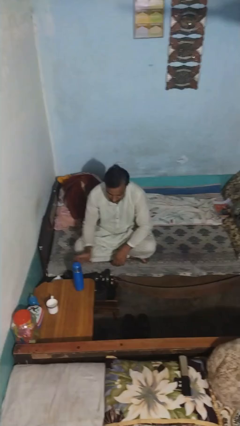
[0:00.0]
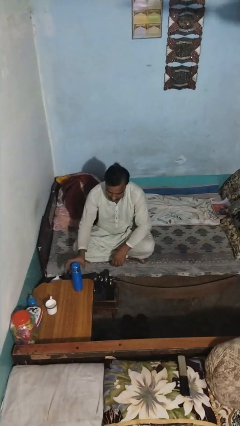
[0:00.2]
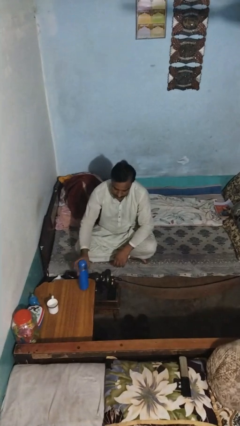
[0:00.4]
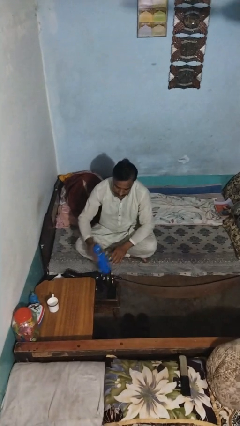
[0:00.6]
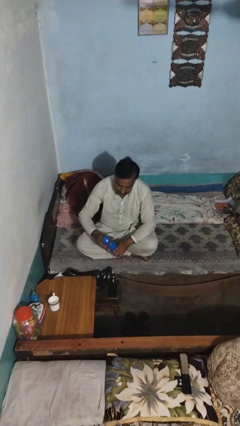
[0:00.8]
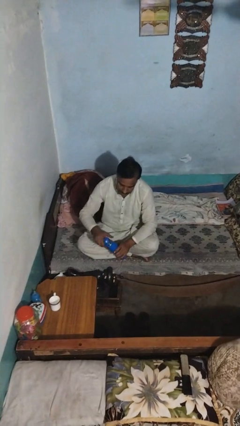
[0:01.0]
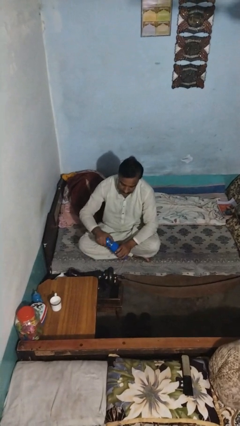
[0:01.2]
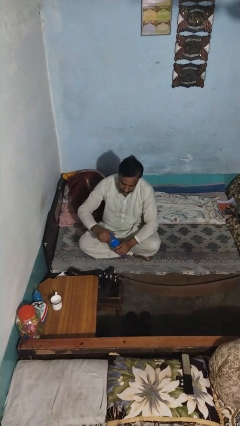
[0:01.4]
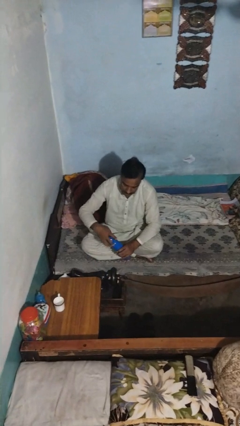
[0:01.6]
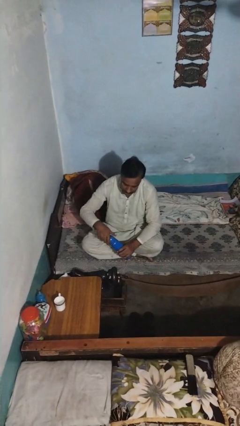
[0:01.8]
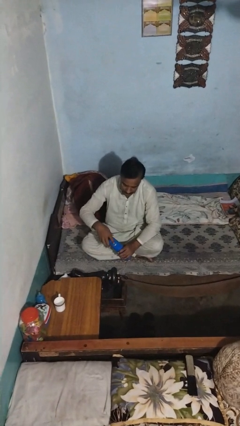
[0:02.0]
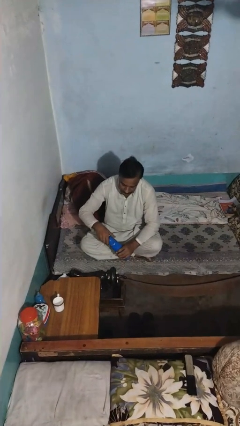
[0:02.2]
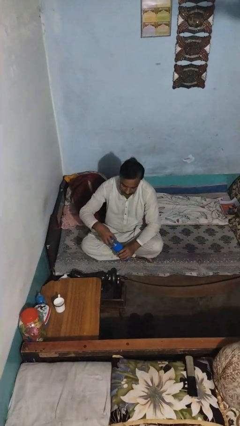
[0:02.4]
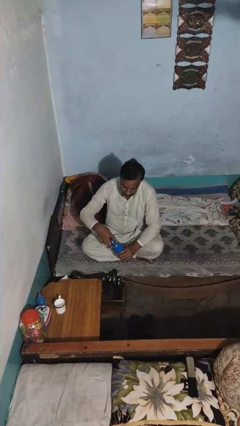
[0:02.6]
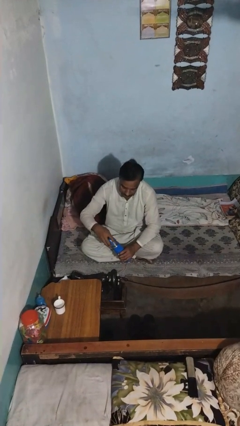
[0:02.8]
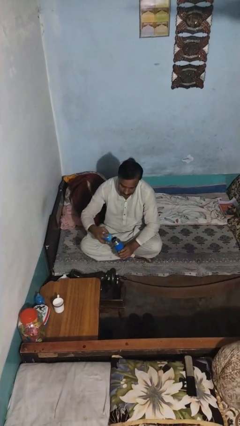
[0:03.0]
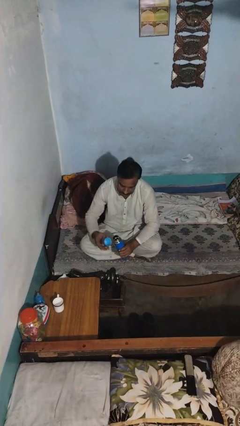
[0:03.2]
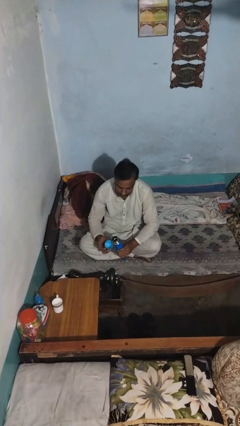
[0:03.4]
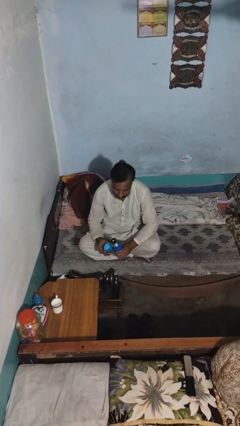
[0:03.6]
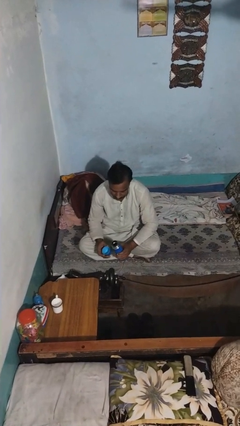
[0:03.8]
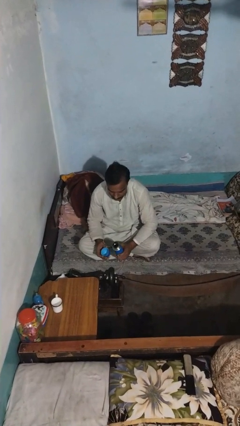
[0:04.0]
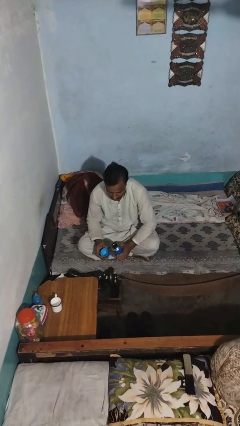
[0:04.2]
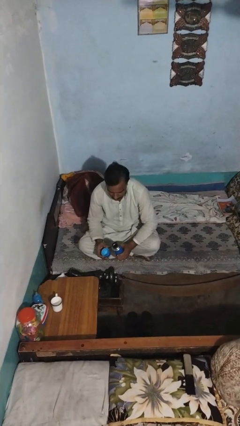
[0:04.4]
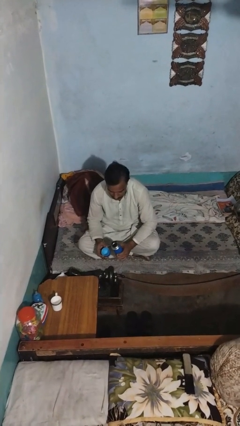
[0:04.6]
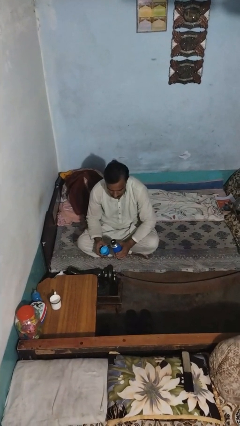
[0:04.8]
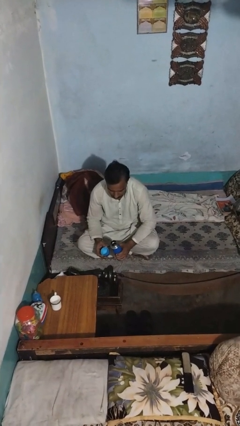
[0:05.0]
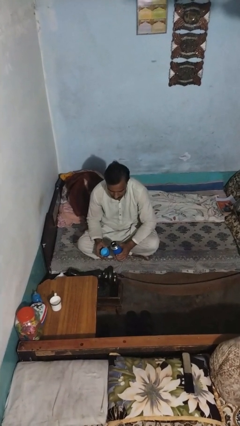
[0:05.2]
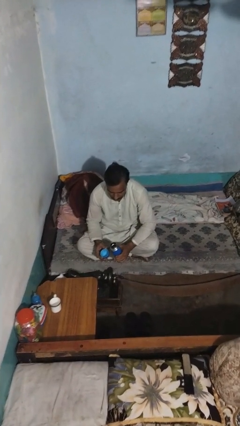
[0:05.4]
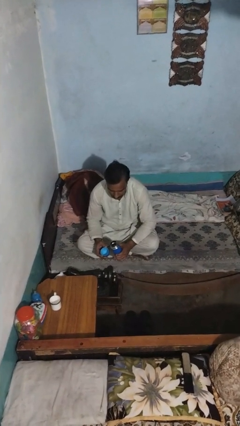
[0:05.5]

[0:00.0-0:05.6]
person unscrews lid from bottle

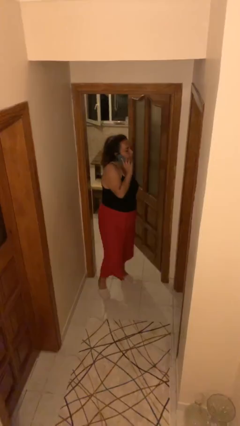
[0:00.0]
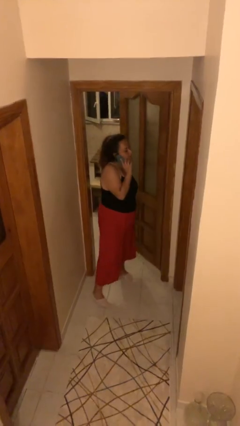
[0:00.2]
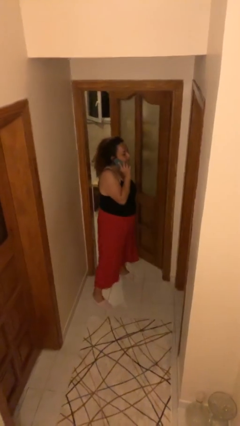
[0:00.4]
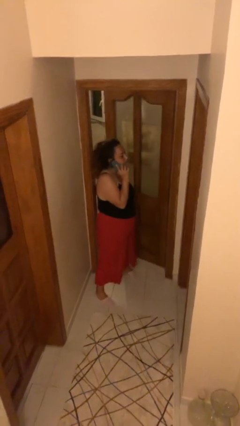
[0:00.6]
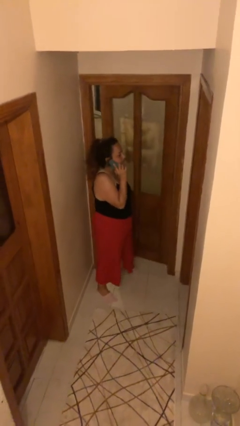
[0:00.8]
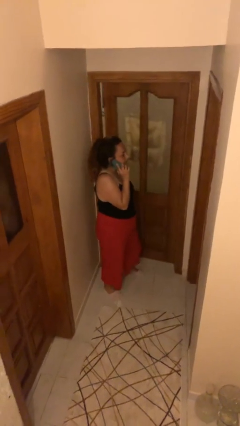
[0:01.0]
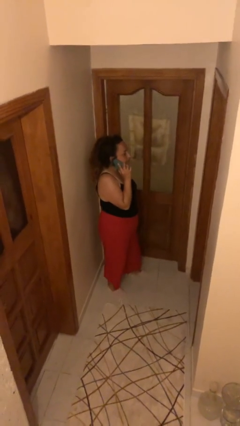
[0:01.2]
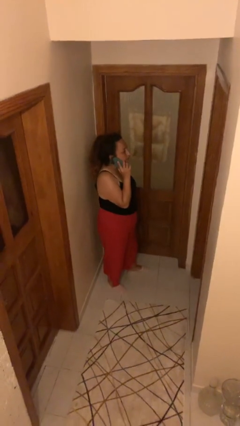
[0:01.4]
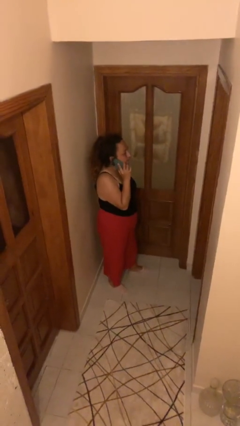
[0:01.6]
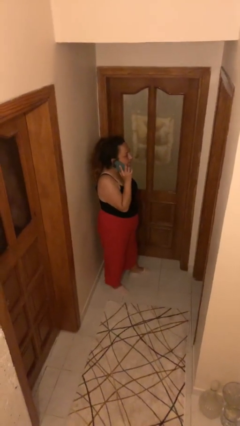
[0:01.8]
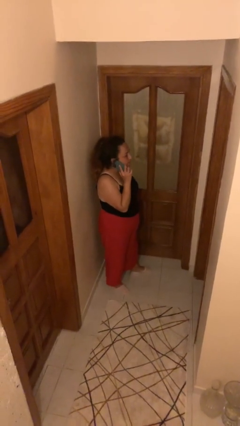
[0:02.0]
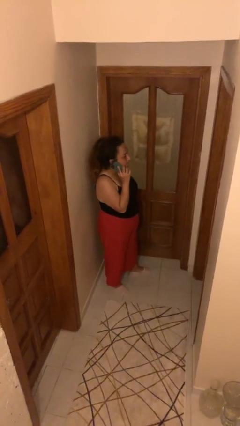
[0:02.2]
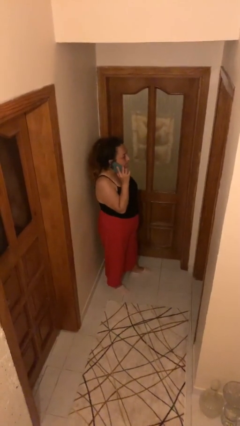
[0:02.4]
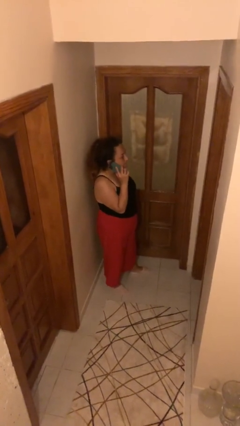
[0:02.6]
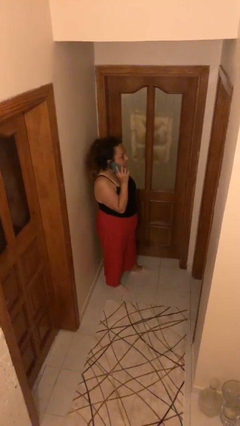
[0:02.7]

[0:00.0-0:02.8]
person closes facility door

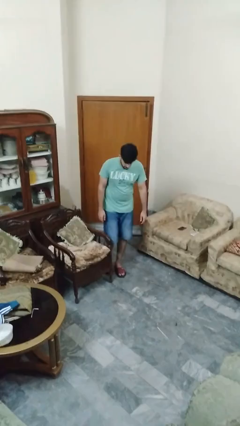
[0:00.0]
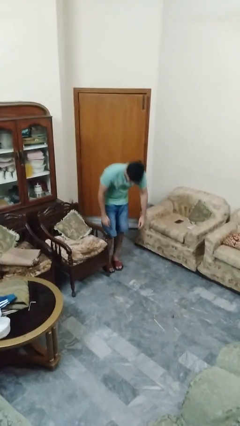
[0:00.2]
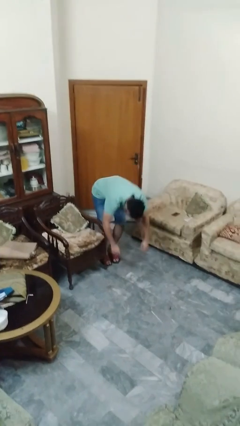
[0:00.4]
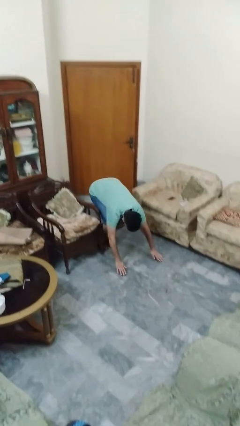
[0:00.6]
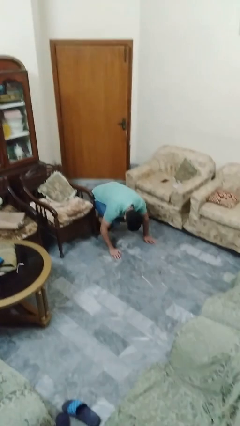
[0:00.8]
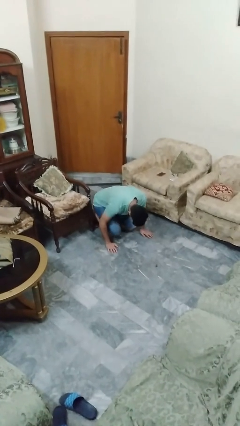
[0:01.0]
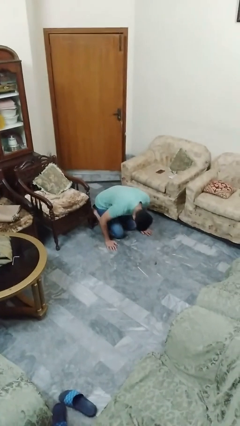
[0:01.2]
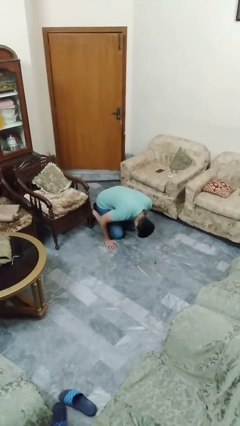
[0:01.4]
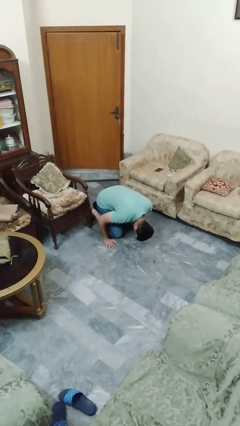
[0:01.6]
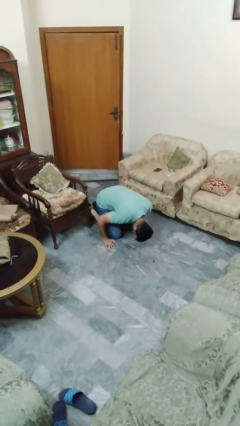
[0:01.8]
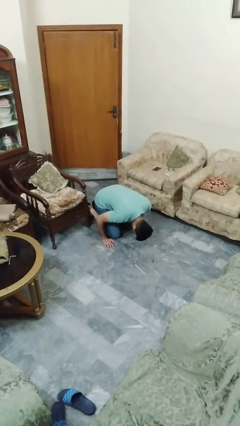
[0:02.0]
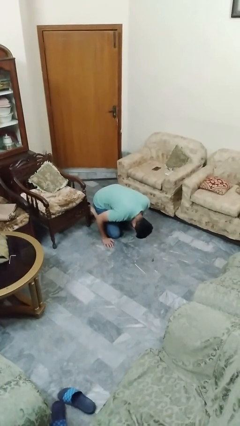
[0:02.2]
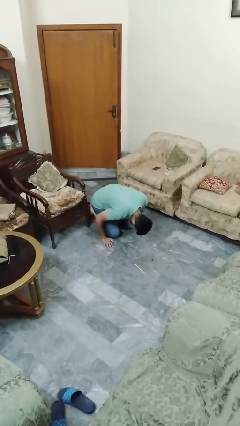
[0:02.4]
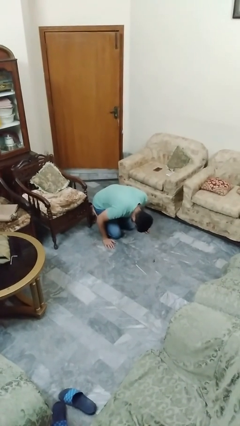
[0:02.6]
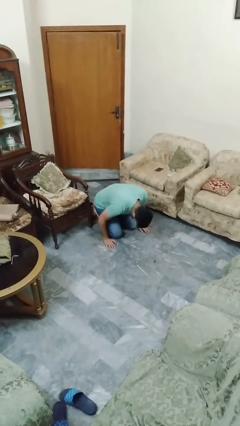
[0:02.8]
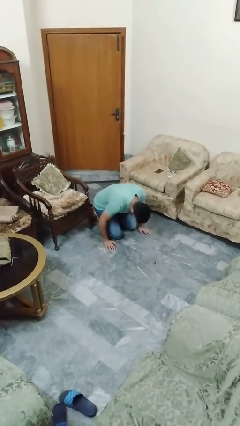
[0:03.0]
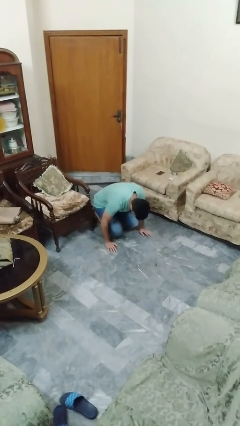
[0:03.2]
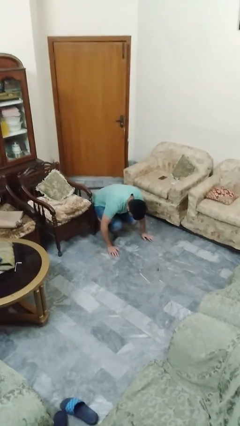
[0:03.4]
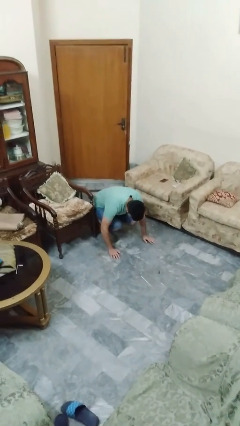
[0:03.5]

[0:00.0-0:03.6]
person trips on object on floor

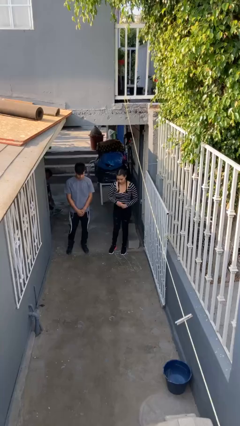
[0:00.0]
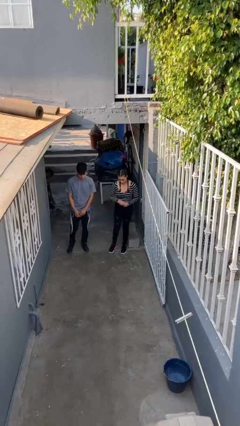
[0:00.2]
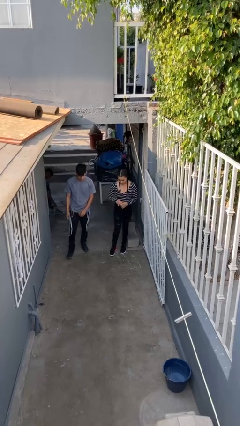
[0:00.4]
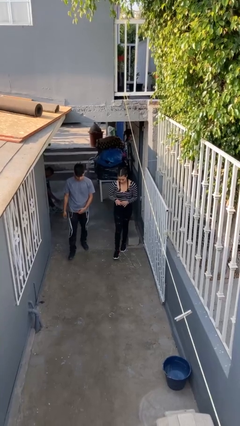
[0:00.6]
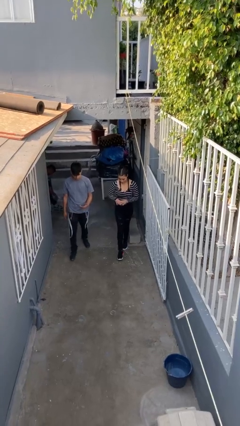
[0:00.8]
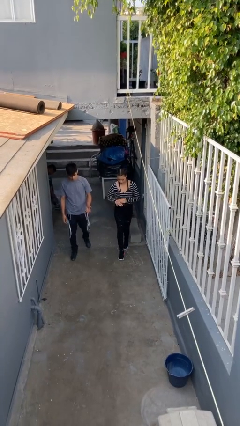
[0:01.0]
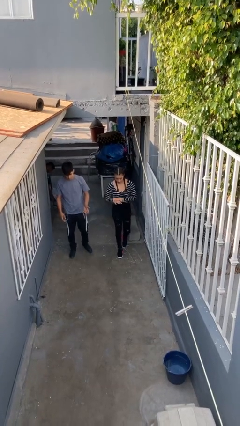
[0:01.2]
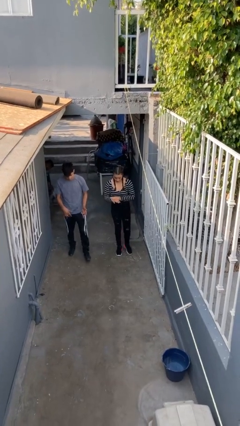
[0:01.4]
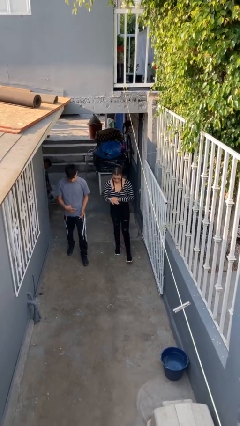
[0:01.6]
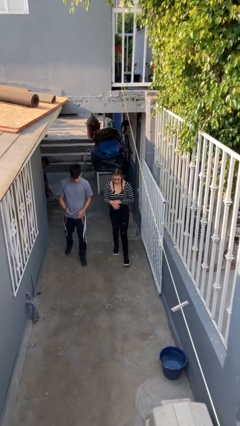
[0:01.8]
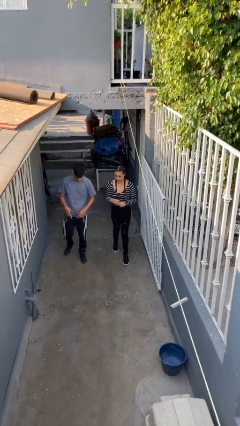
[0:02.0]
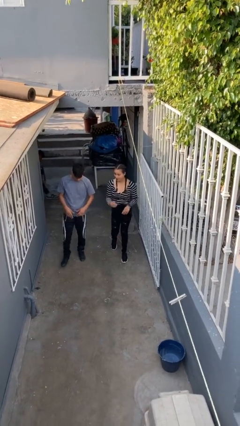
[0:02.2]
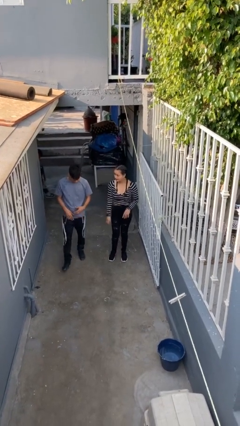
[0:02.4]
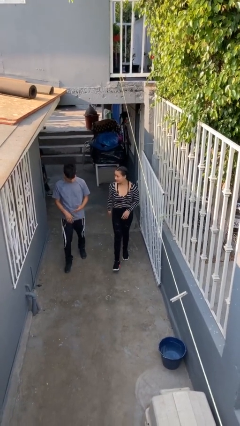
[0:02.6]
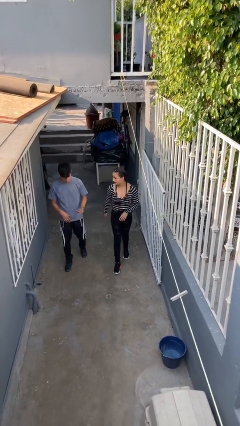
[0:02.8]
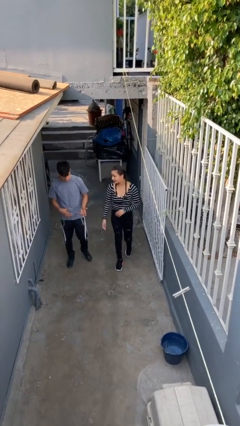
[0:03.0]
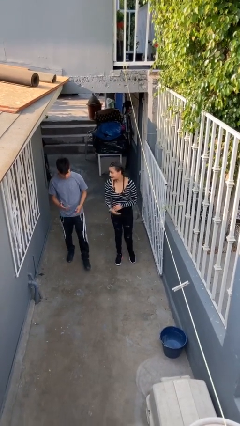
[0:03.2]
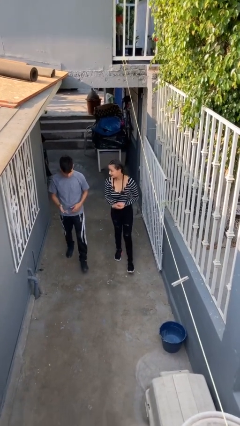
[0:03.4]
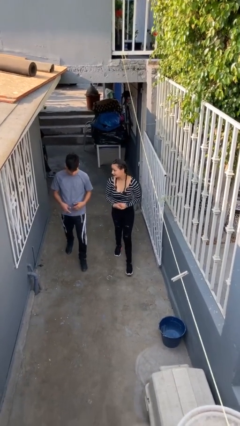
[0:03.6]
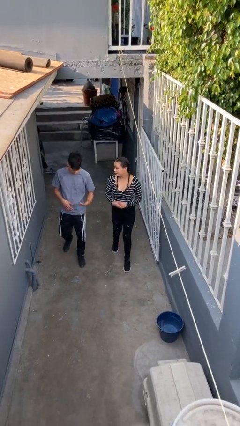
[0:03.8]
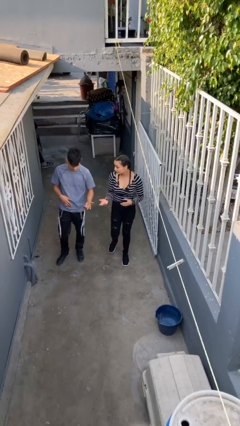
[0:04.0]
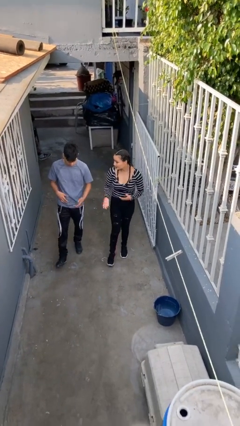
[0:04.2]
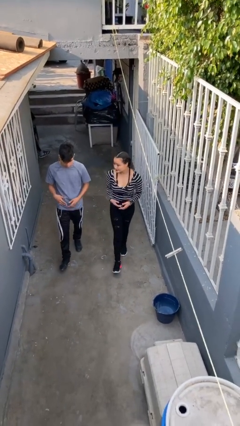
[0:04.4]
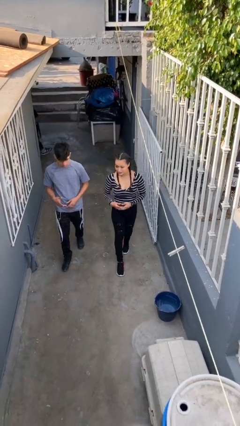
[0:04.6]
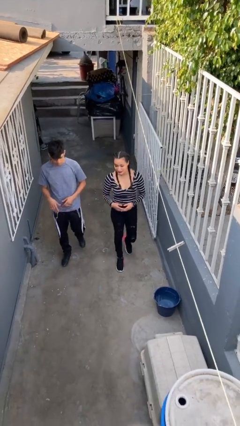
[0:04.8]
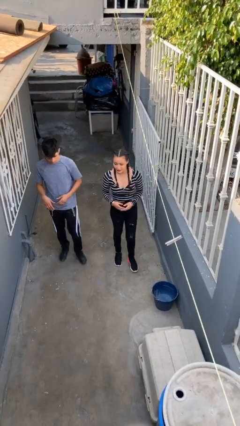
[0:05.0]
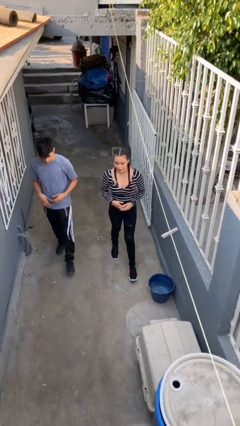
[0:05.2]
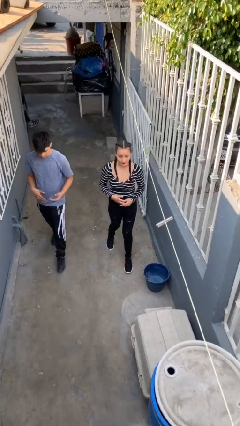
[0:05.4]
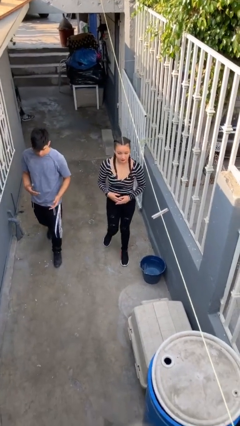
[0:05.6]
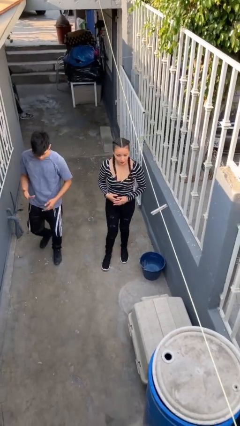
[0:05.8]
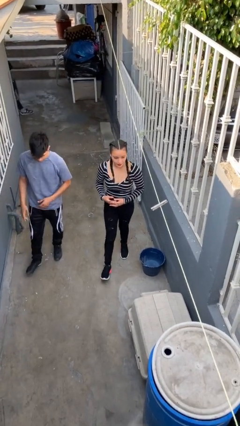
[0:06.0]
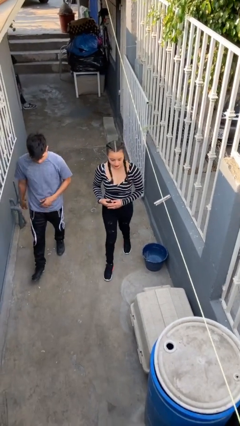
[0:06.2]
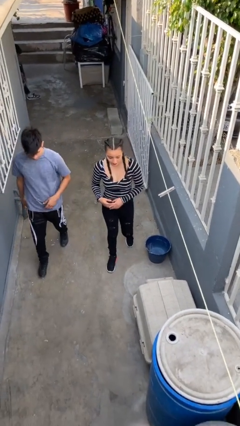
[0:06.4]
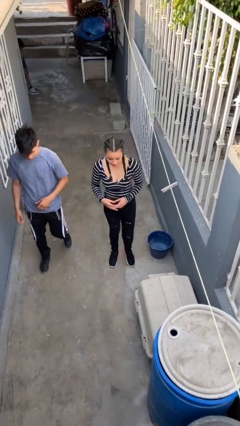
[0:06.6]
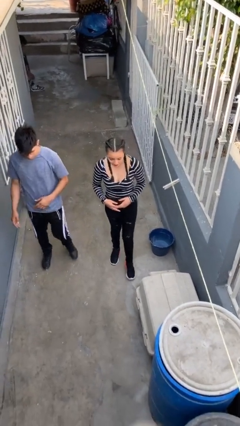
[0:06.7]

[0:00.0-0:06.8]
person talks to person
